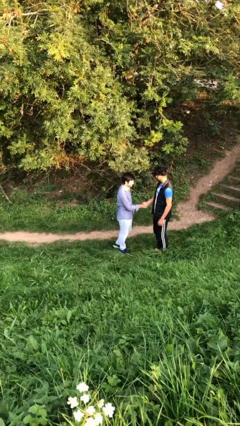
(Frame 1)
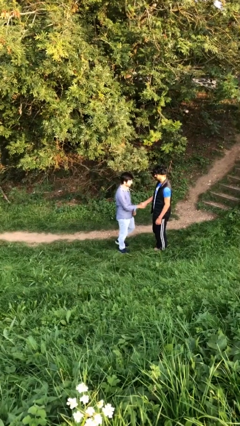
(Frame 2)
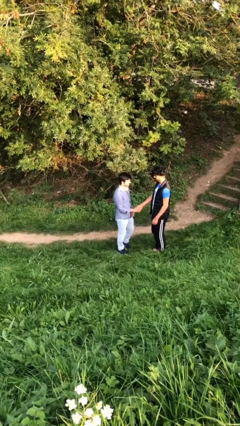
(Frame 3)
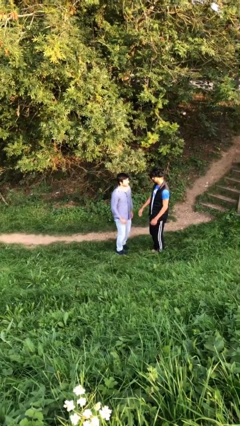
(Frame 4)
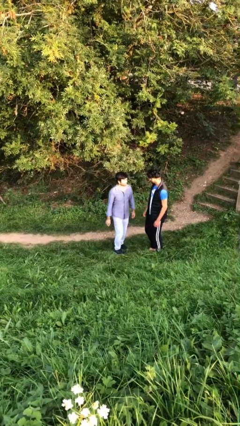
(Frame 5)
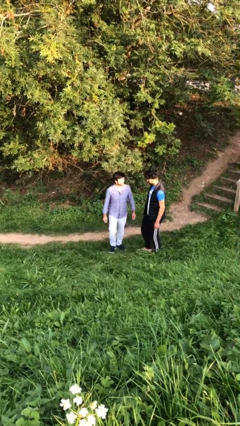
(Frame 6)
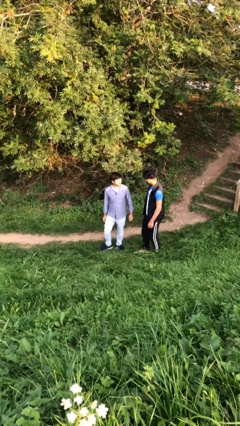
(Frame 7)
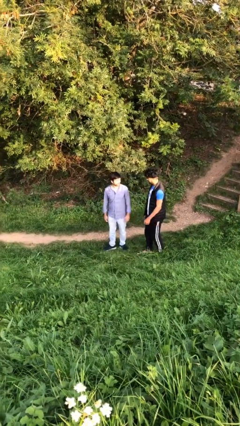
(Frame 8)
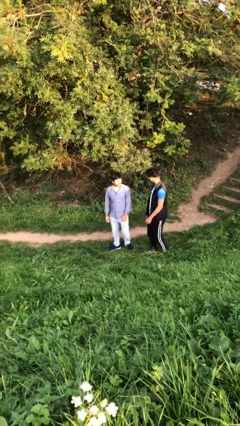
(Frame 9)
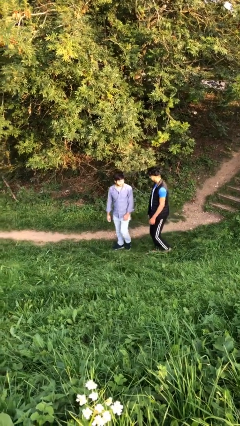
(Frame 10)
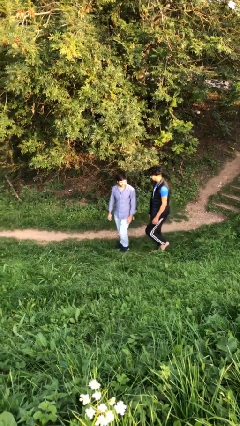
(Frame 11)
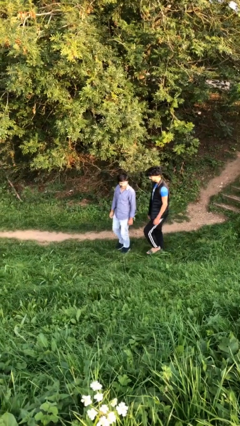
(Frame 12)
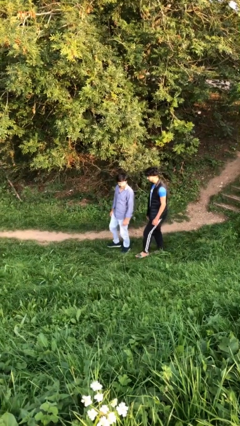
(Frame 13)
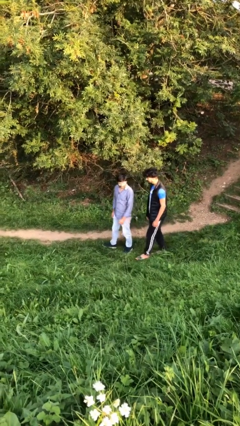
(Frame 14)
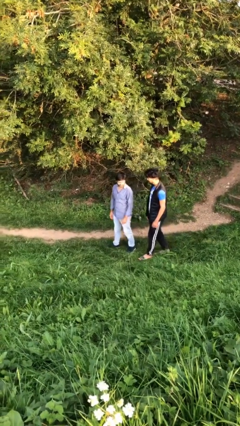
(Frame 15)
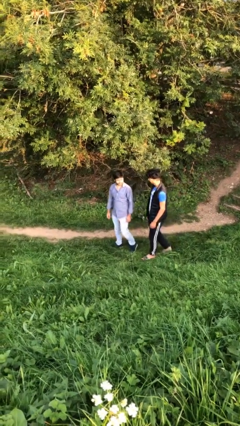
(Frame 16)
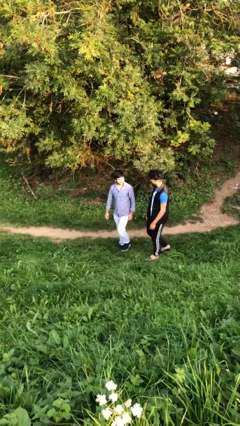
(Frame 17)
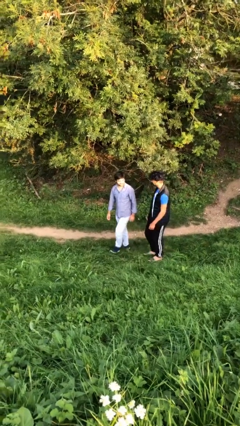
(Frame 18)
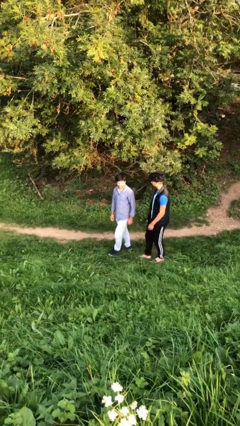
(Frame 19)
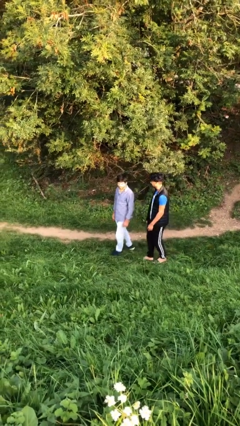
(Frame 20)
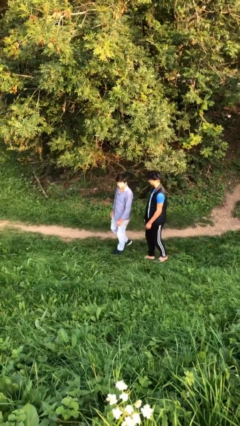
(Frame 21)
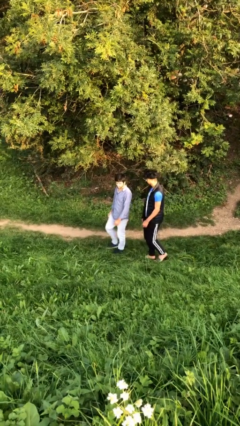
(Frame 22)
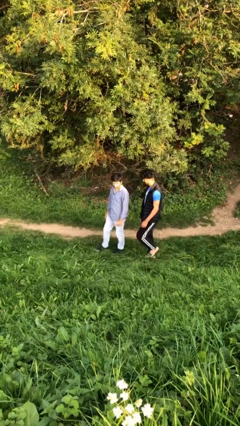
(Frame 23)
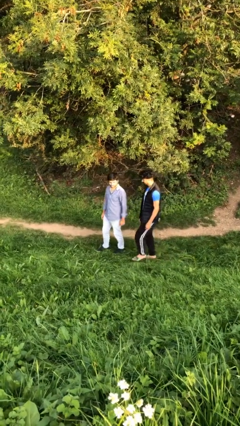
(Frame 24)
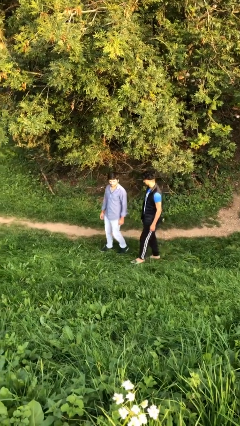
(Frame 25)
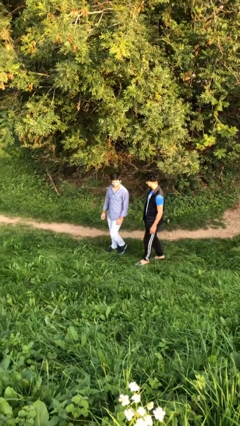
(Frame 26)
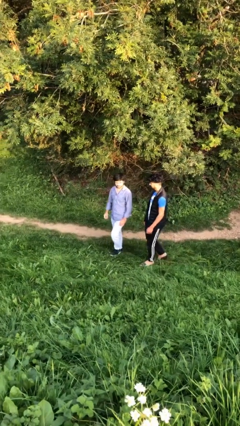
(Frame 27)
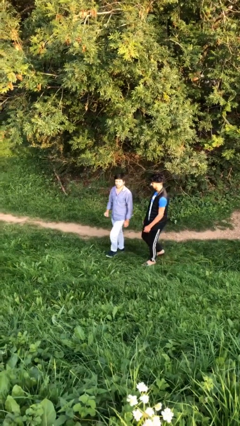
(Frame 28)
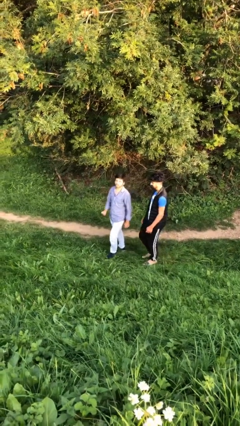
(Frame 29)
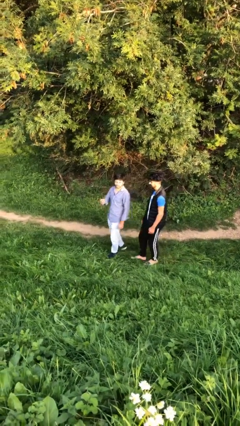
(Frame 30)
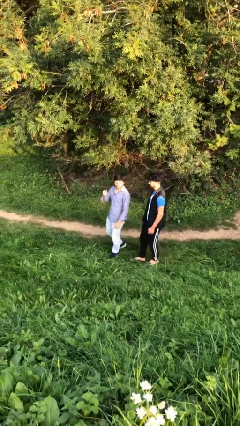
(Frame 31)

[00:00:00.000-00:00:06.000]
person talks to person

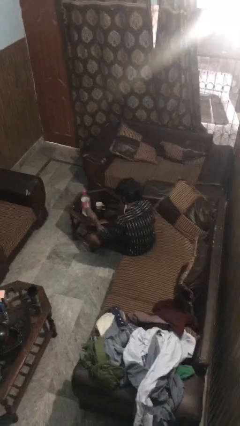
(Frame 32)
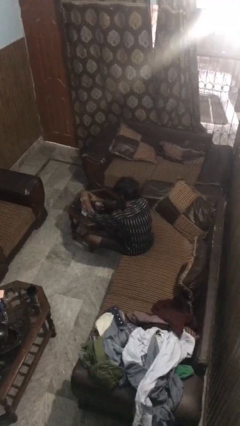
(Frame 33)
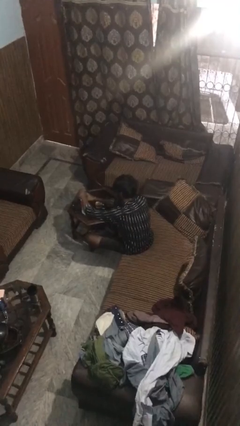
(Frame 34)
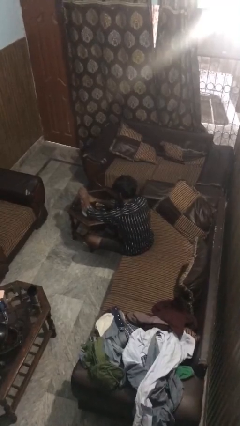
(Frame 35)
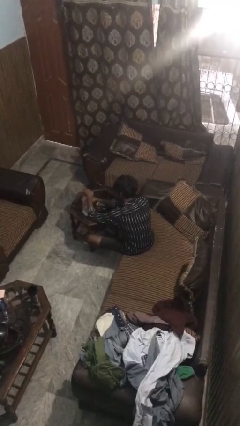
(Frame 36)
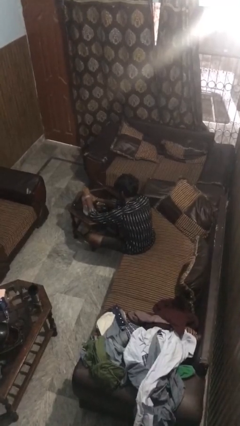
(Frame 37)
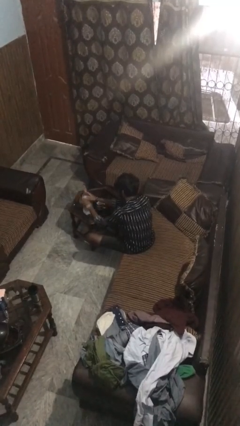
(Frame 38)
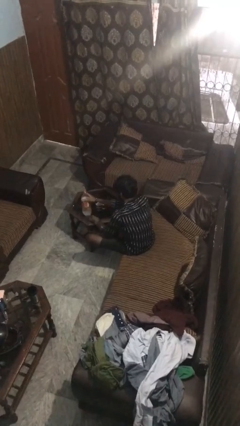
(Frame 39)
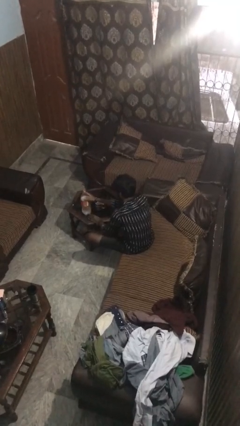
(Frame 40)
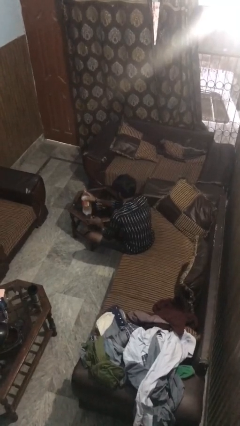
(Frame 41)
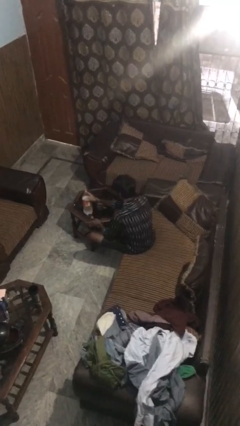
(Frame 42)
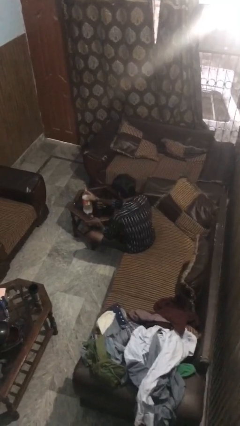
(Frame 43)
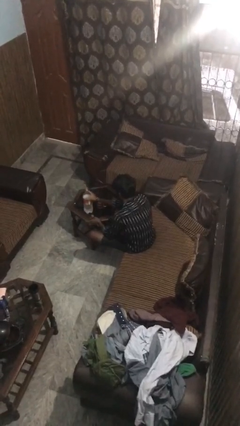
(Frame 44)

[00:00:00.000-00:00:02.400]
person unscrews lid from bottle

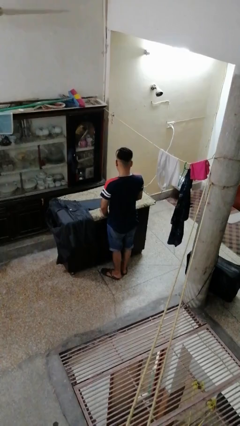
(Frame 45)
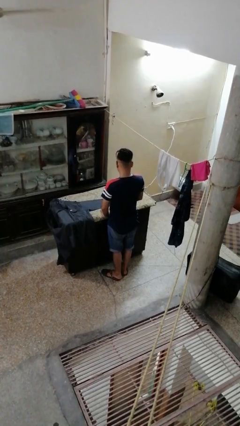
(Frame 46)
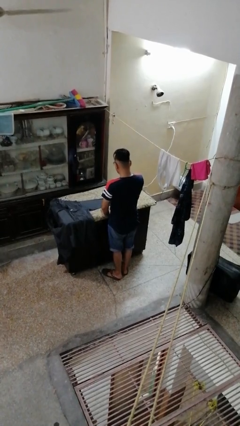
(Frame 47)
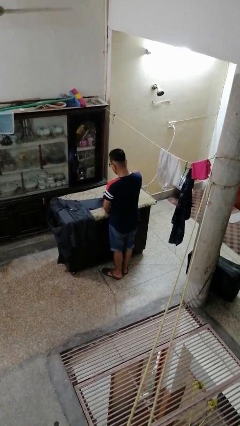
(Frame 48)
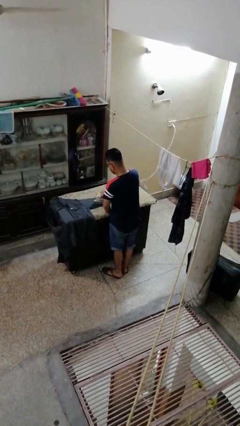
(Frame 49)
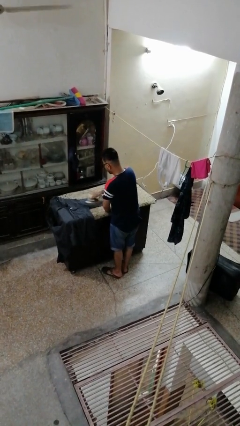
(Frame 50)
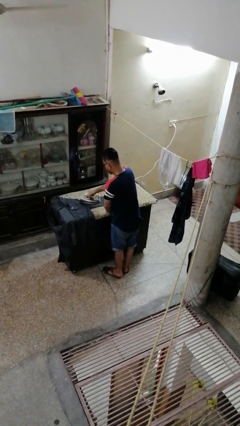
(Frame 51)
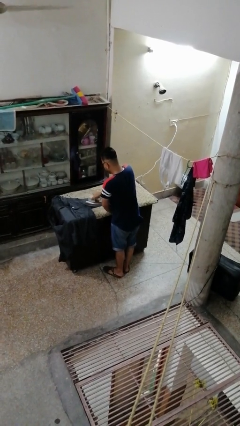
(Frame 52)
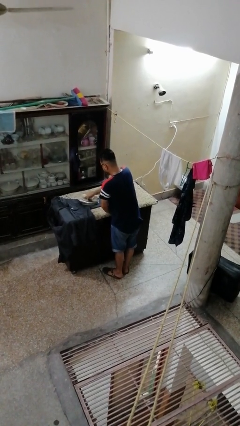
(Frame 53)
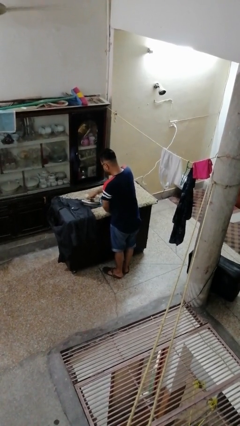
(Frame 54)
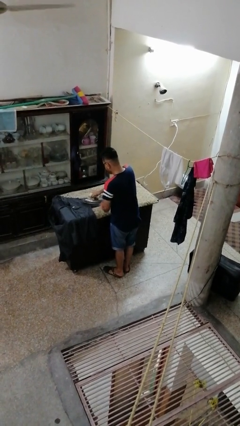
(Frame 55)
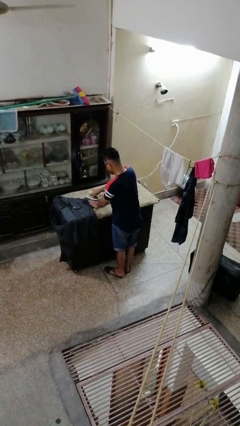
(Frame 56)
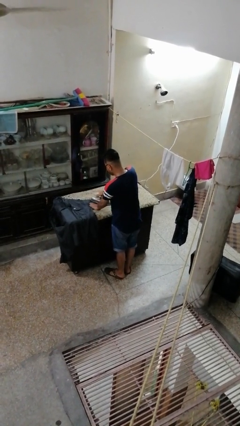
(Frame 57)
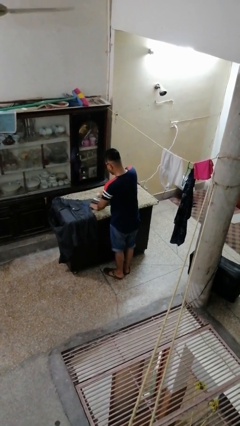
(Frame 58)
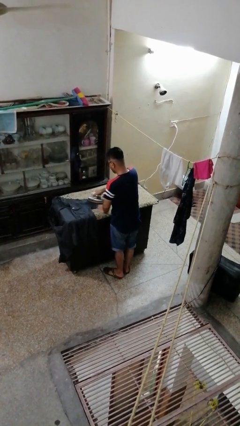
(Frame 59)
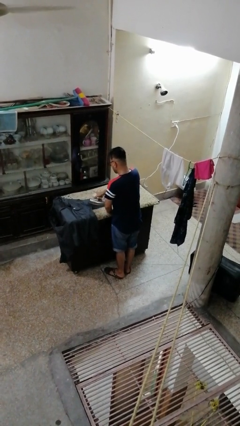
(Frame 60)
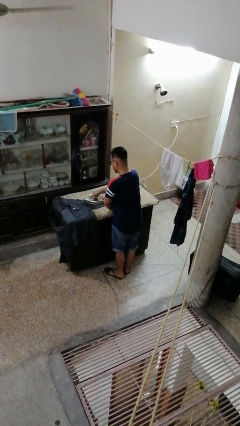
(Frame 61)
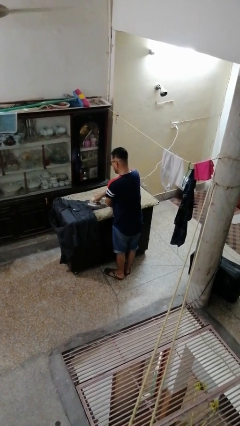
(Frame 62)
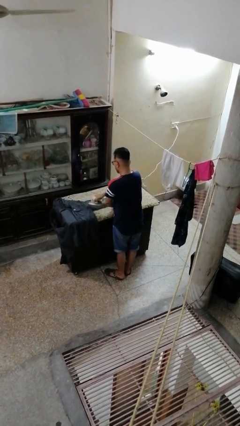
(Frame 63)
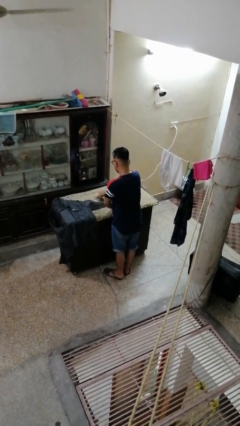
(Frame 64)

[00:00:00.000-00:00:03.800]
person irons clothes

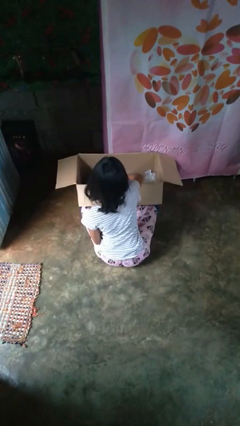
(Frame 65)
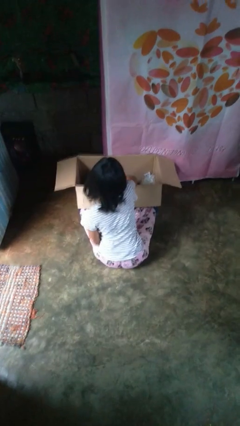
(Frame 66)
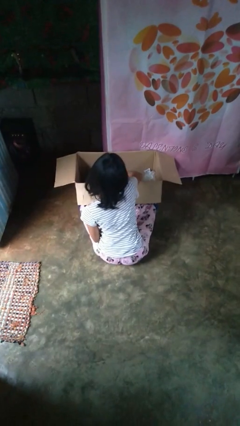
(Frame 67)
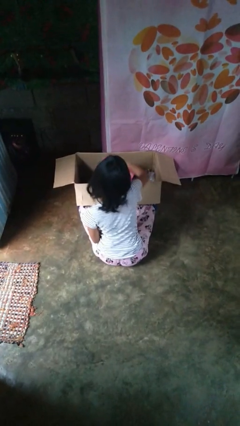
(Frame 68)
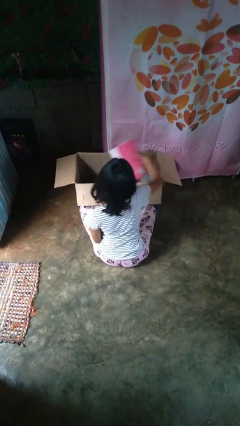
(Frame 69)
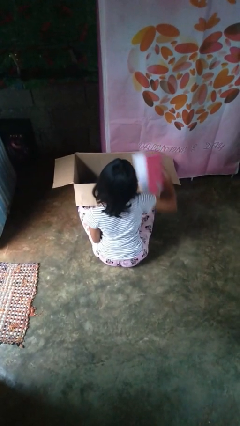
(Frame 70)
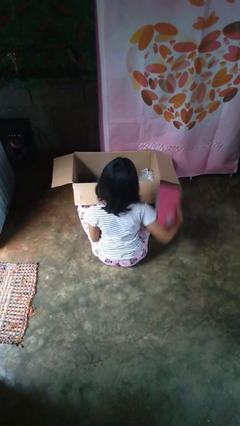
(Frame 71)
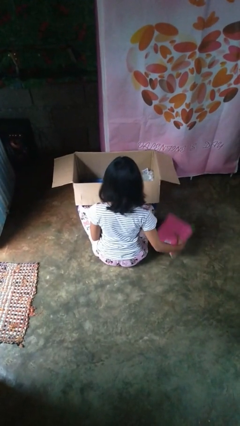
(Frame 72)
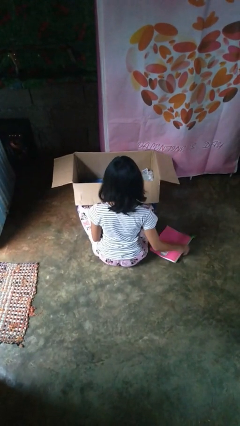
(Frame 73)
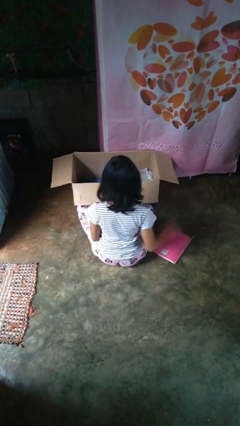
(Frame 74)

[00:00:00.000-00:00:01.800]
person takes object from box

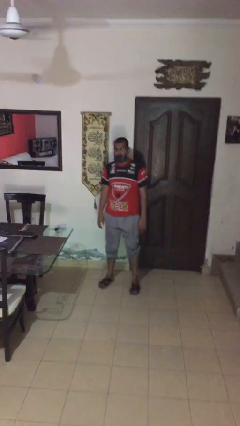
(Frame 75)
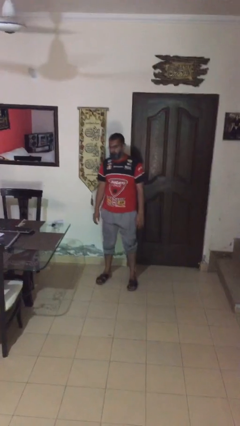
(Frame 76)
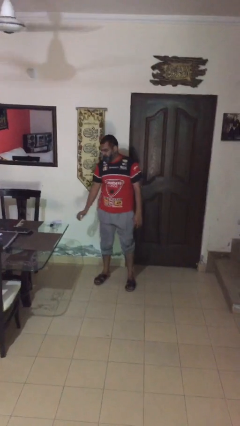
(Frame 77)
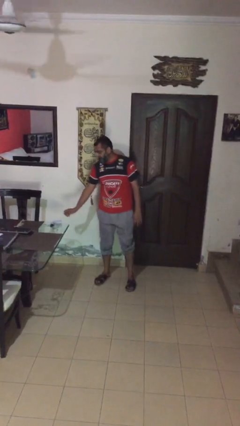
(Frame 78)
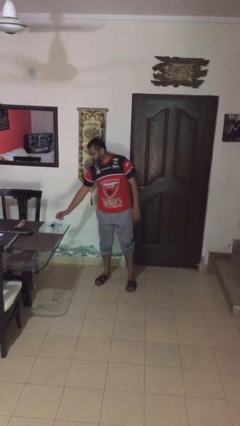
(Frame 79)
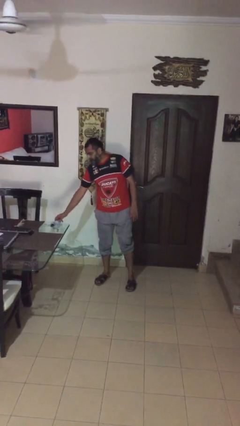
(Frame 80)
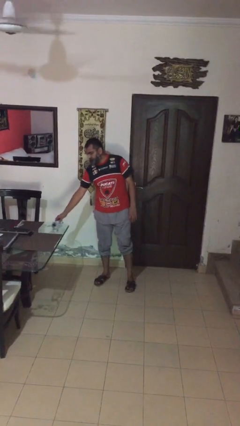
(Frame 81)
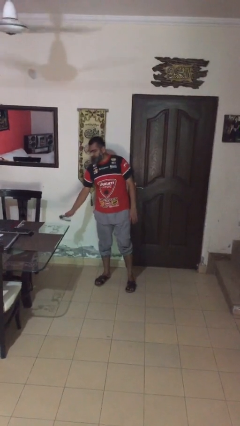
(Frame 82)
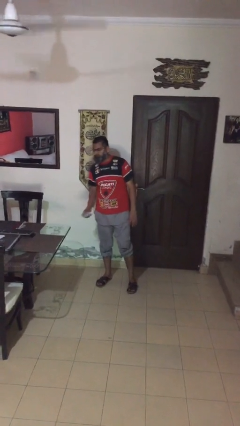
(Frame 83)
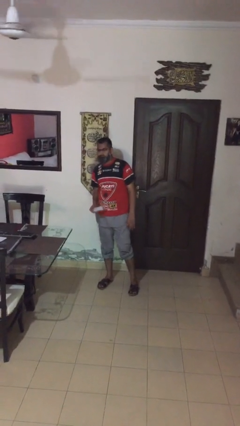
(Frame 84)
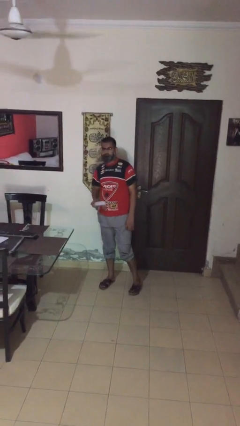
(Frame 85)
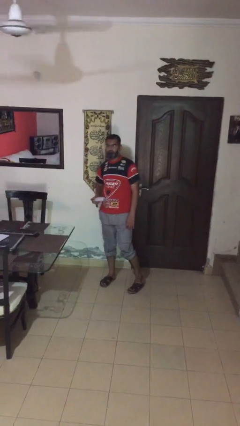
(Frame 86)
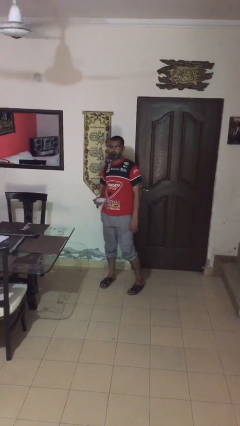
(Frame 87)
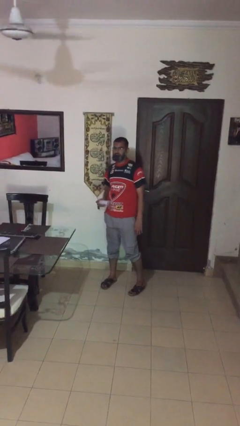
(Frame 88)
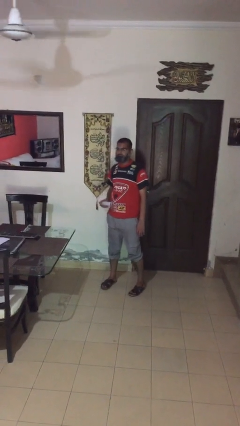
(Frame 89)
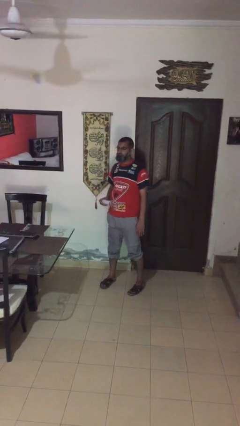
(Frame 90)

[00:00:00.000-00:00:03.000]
person picks up object from table

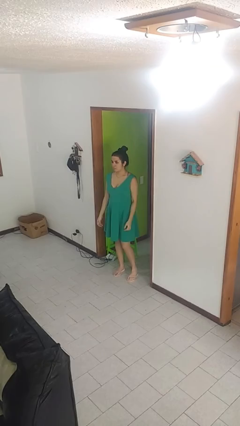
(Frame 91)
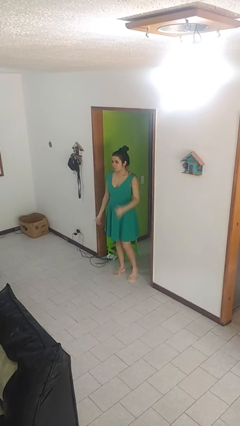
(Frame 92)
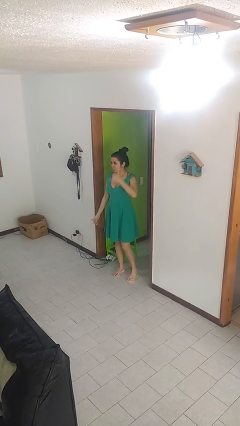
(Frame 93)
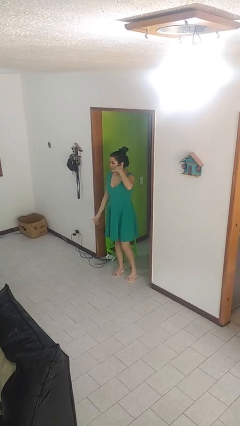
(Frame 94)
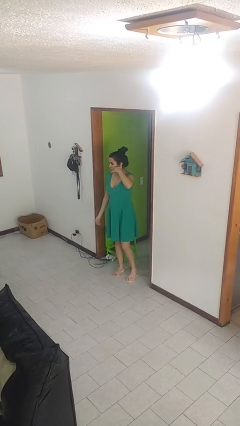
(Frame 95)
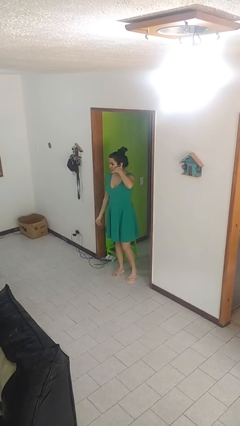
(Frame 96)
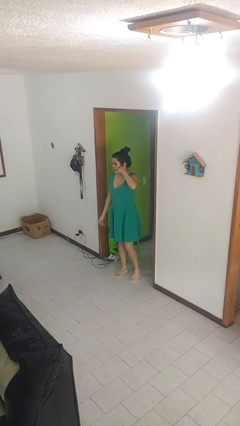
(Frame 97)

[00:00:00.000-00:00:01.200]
person gestures call me
